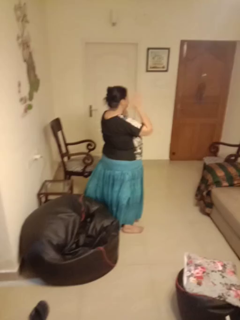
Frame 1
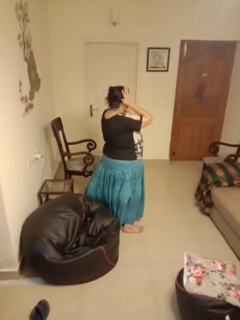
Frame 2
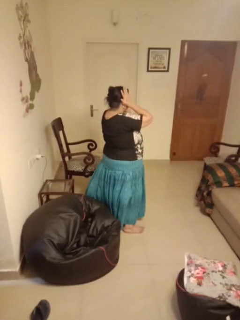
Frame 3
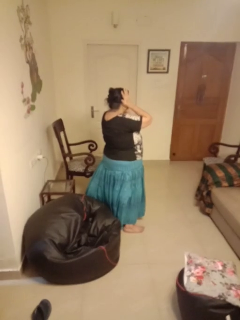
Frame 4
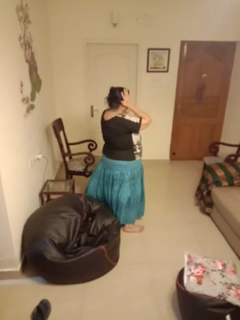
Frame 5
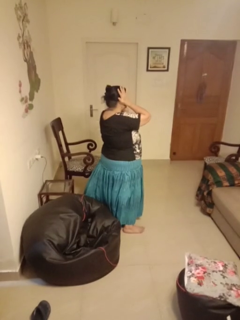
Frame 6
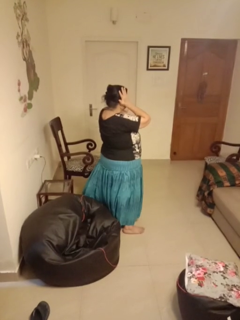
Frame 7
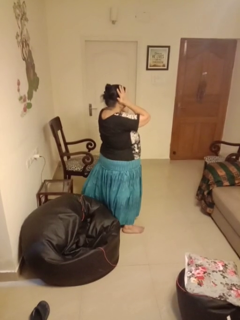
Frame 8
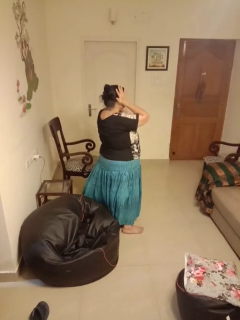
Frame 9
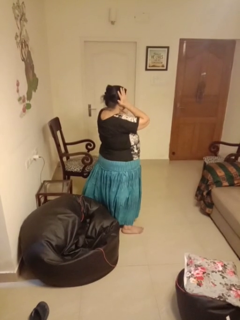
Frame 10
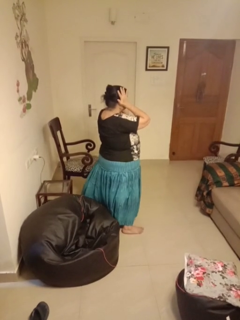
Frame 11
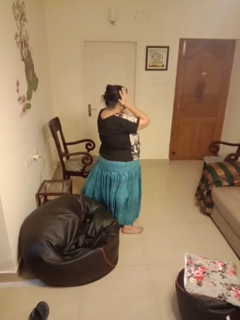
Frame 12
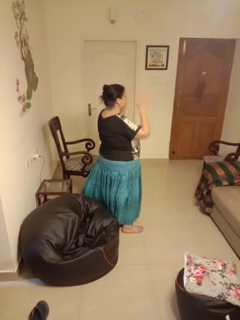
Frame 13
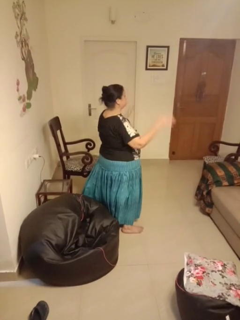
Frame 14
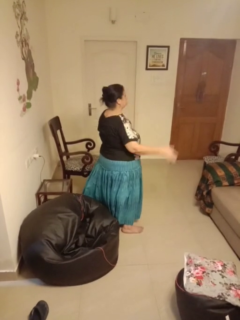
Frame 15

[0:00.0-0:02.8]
person puts fingers in ear

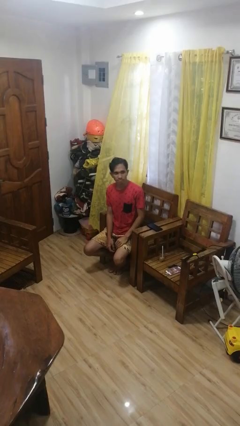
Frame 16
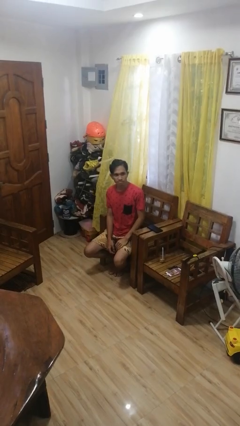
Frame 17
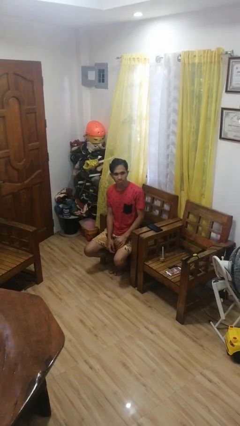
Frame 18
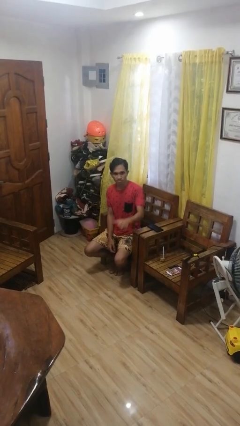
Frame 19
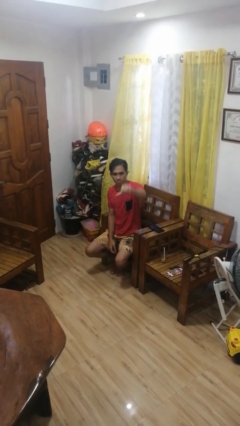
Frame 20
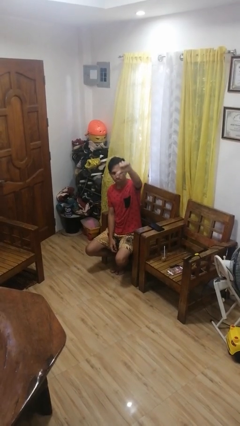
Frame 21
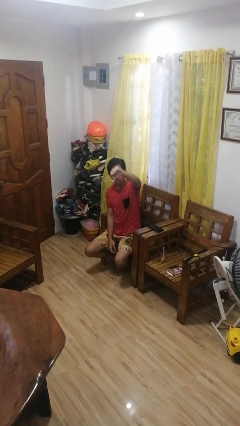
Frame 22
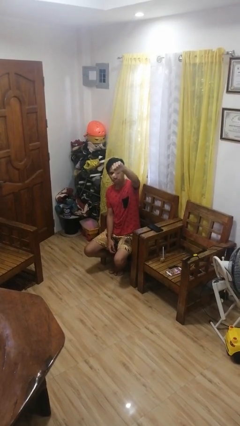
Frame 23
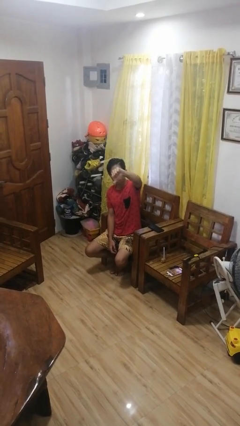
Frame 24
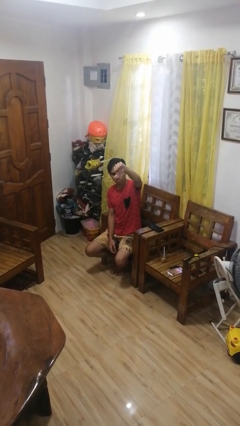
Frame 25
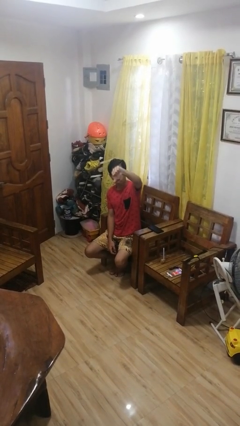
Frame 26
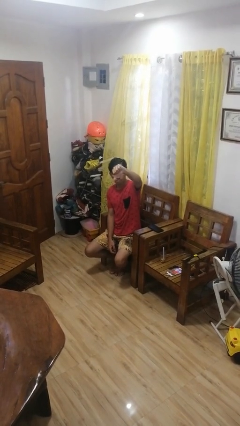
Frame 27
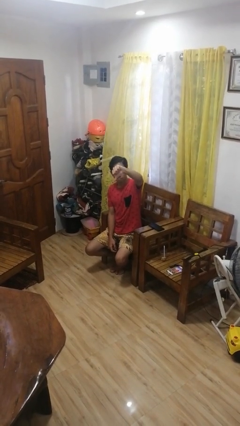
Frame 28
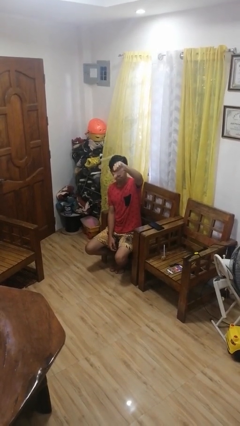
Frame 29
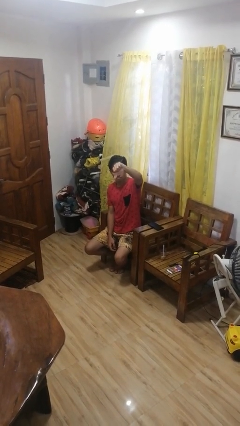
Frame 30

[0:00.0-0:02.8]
person gestures thumbs down

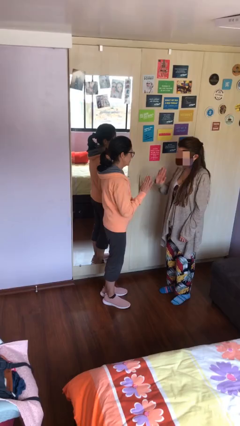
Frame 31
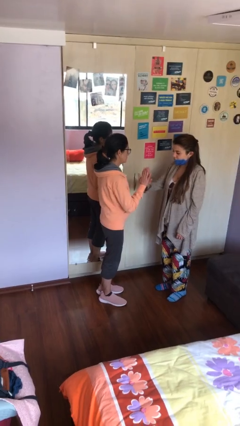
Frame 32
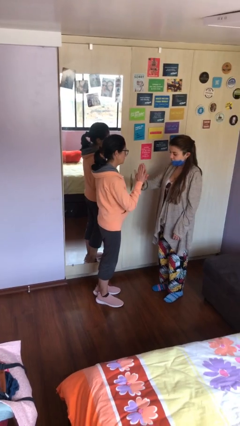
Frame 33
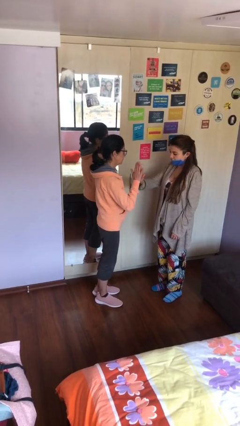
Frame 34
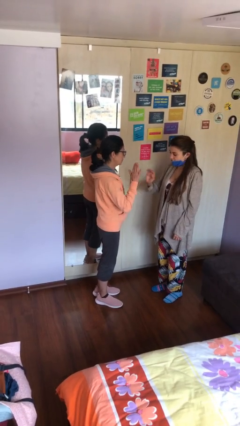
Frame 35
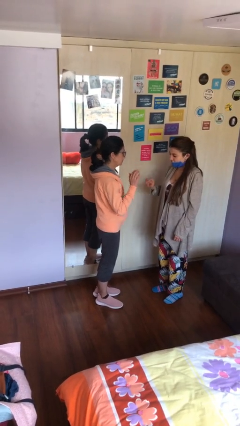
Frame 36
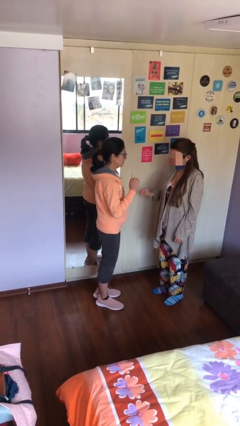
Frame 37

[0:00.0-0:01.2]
person highfives hand

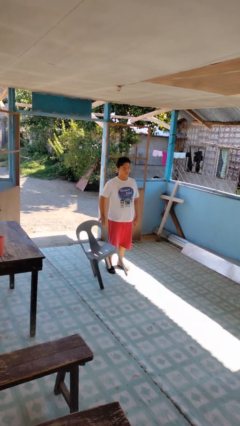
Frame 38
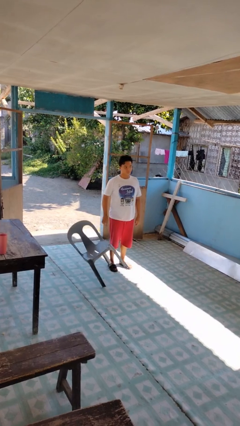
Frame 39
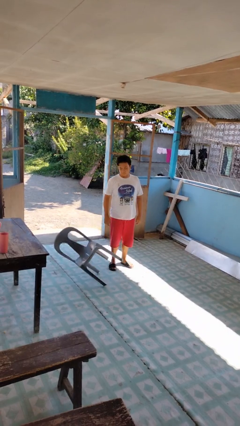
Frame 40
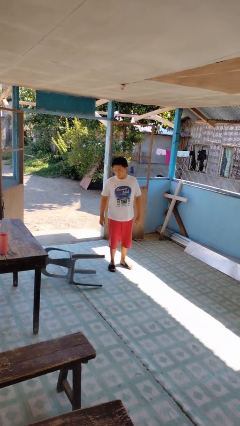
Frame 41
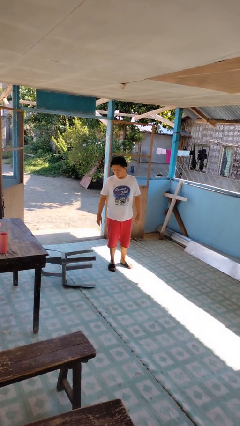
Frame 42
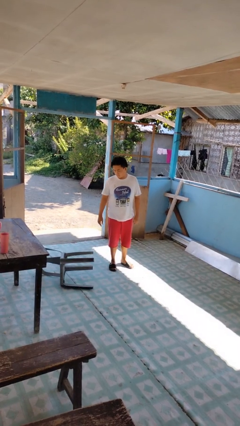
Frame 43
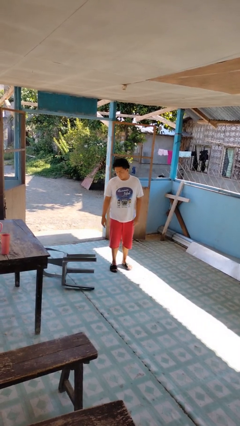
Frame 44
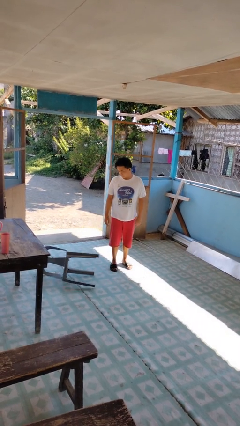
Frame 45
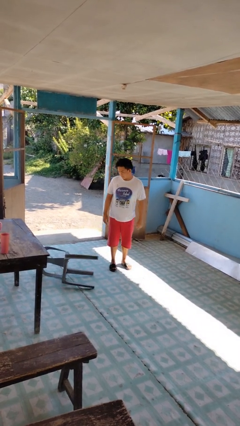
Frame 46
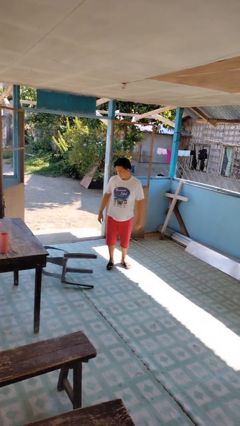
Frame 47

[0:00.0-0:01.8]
person knocks over furniture

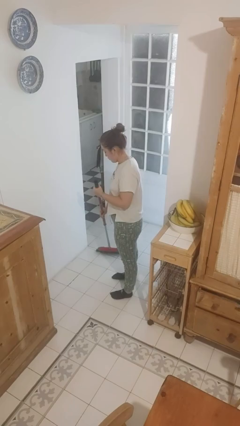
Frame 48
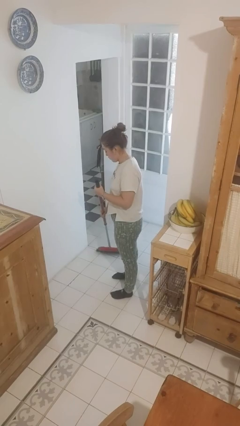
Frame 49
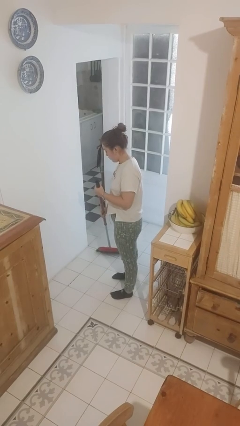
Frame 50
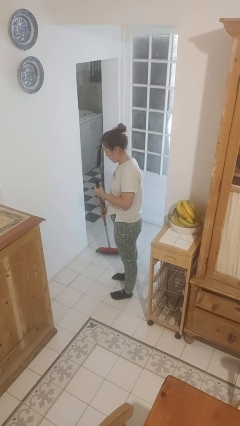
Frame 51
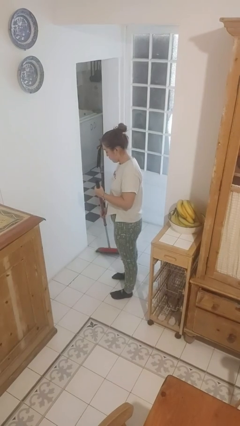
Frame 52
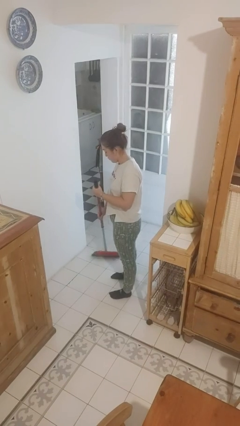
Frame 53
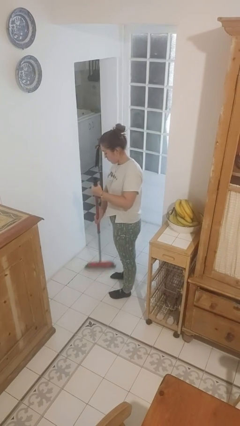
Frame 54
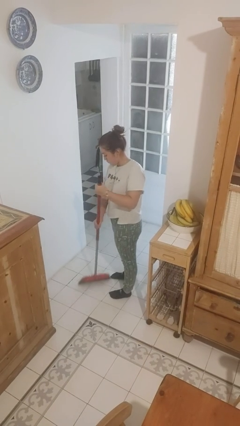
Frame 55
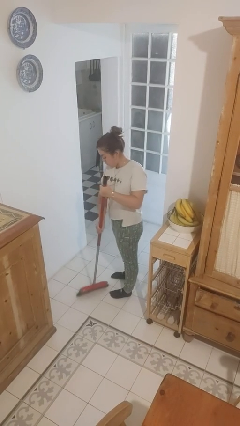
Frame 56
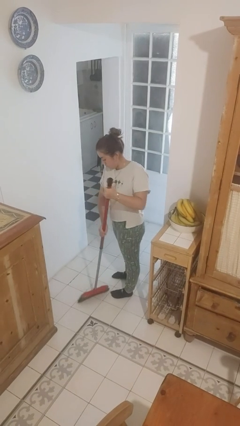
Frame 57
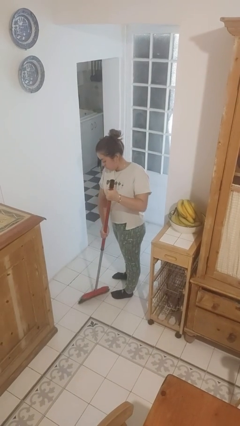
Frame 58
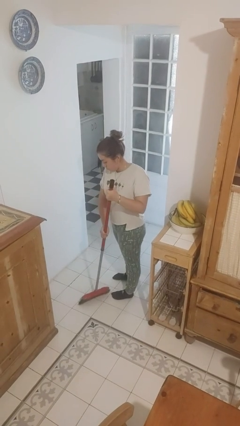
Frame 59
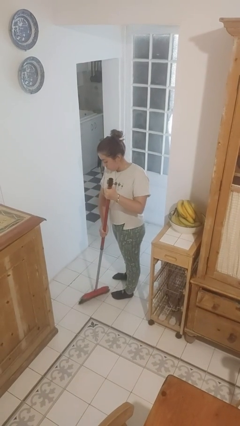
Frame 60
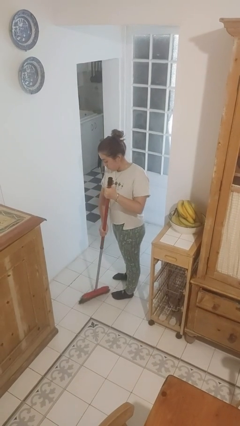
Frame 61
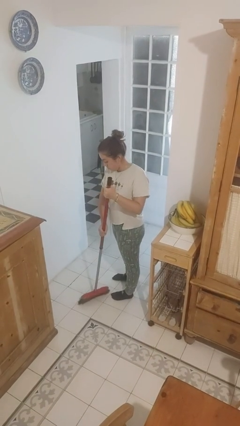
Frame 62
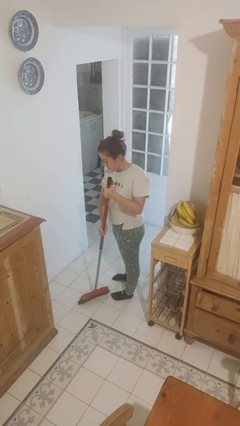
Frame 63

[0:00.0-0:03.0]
person sweeps floor

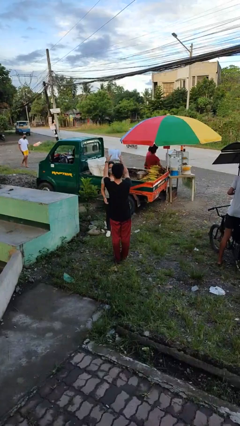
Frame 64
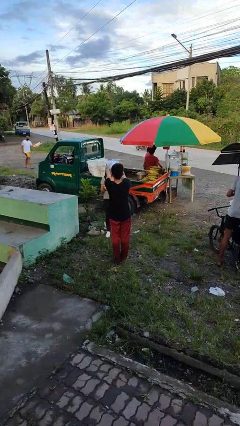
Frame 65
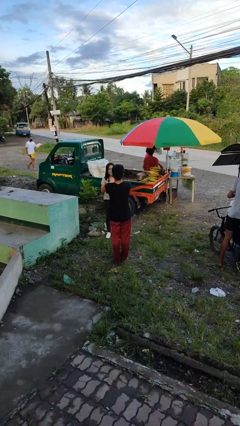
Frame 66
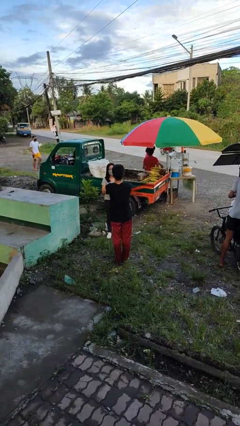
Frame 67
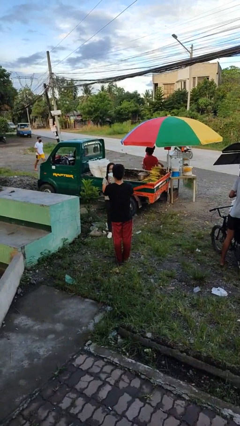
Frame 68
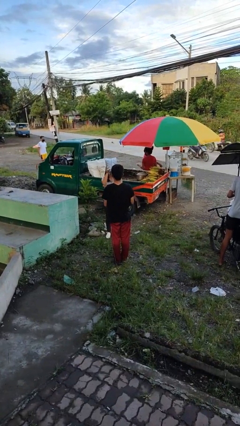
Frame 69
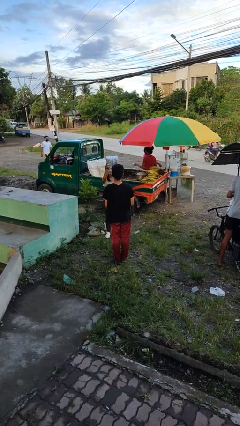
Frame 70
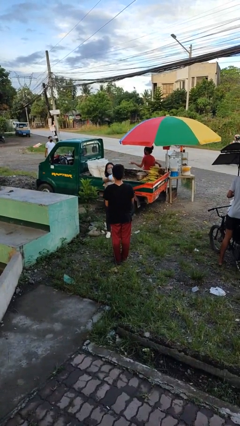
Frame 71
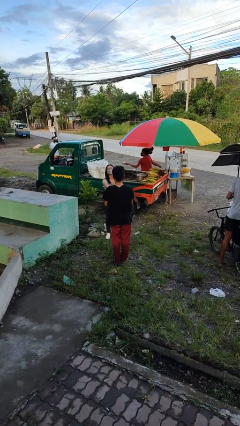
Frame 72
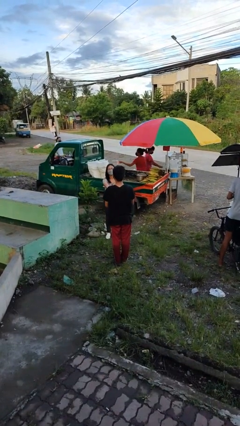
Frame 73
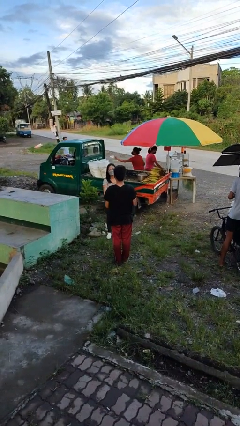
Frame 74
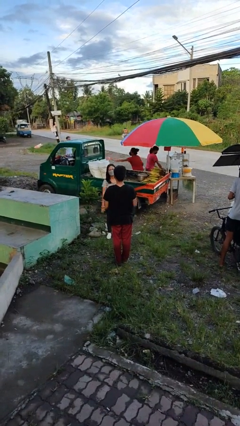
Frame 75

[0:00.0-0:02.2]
person transfers object to person

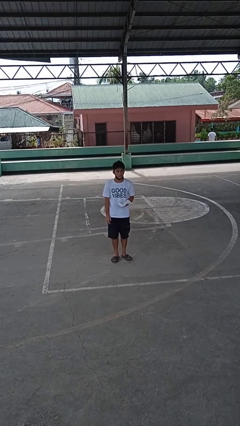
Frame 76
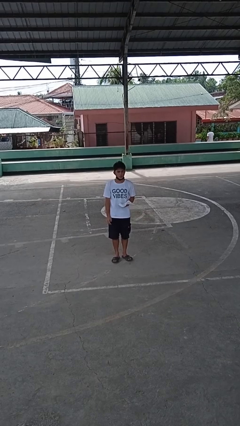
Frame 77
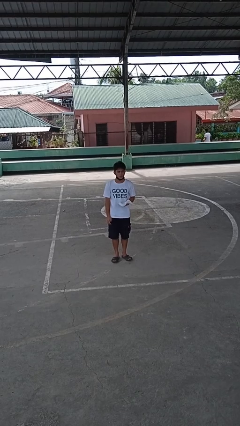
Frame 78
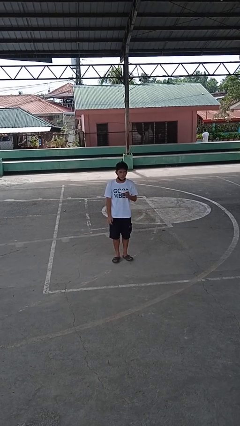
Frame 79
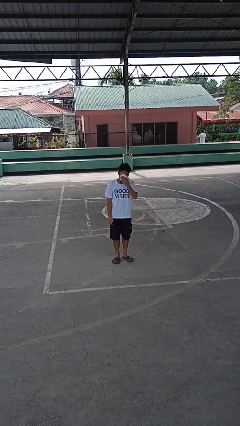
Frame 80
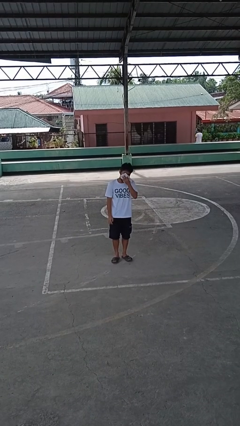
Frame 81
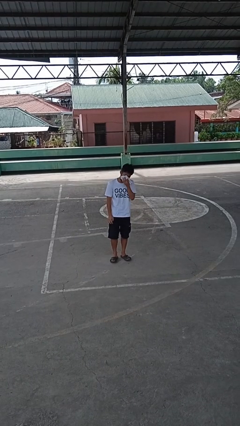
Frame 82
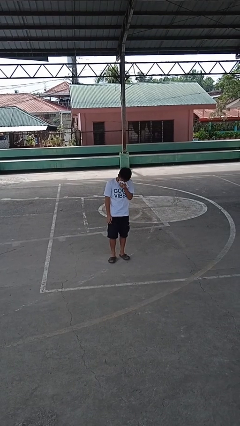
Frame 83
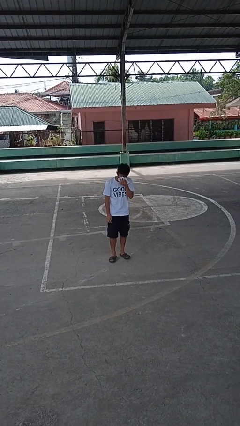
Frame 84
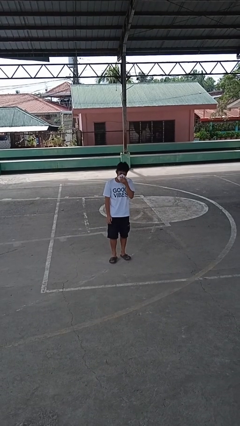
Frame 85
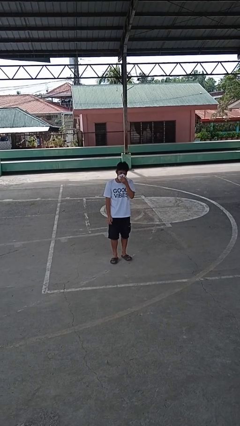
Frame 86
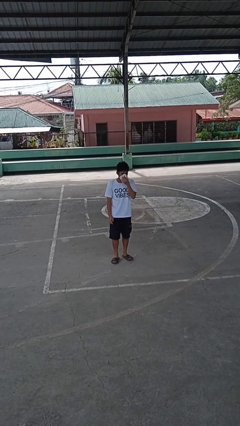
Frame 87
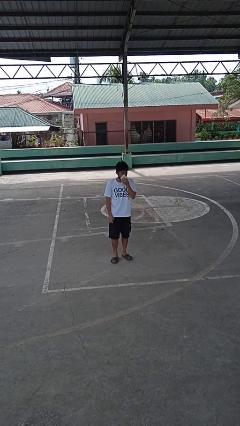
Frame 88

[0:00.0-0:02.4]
person blows nose

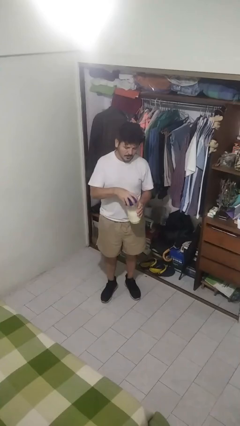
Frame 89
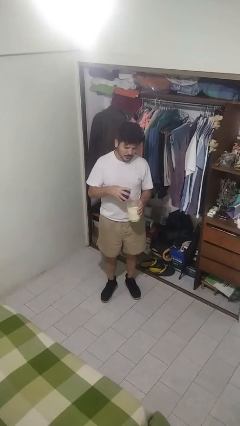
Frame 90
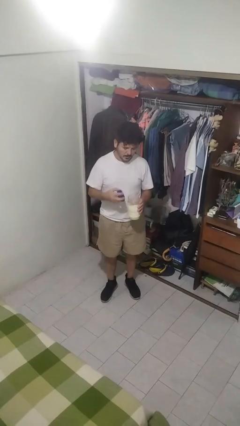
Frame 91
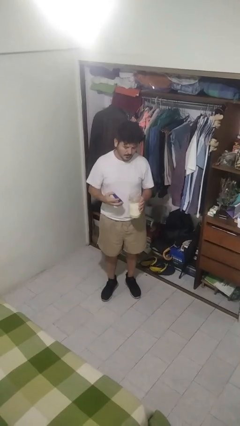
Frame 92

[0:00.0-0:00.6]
person opens jar

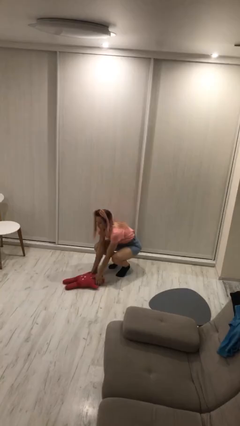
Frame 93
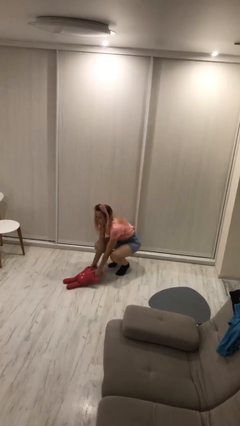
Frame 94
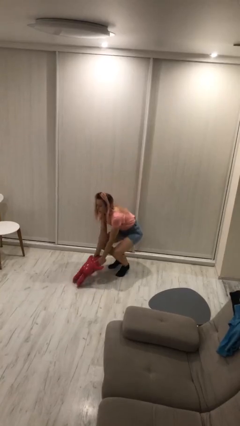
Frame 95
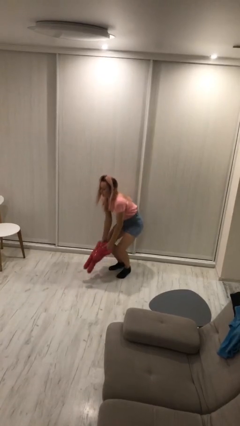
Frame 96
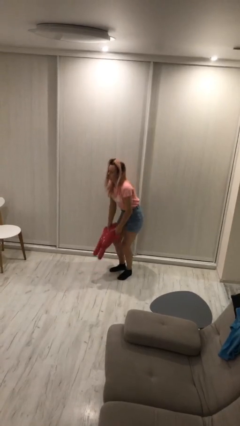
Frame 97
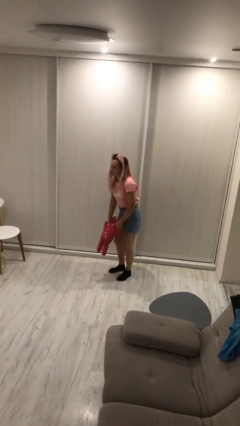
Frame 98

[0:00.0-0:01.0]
person picks up object from floor
